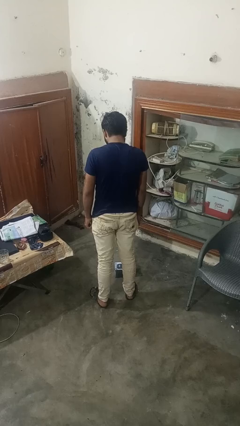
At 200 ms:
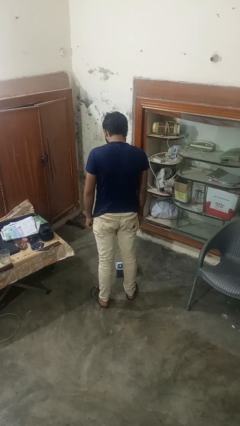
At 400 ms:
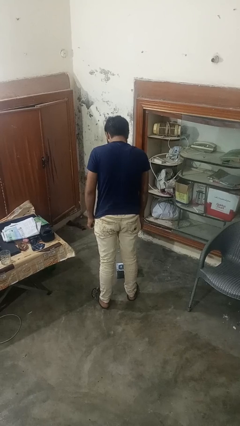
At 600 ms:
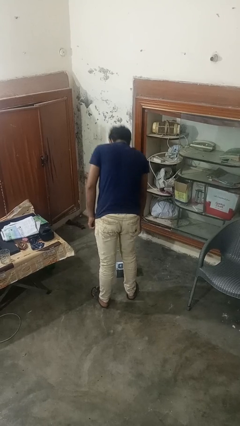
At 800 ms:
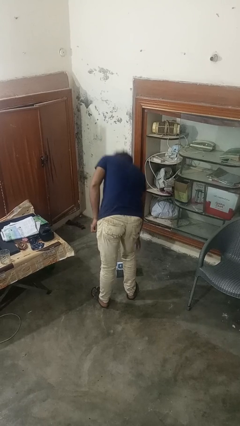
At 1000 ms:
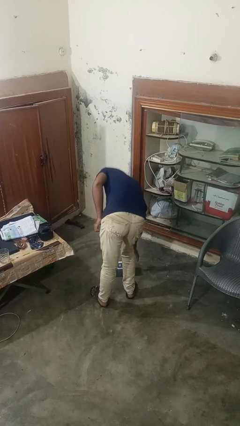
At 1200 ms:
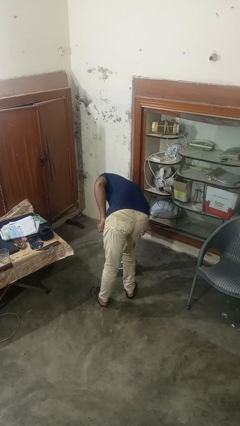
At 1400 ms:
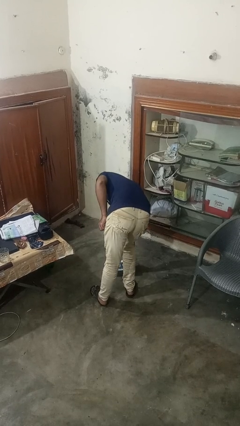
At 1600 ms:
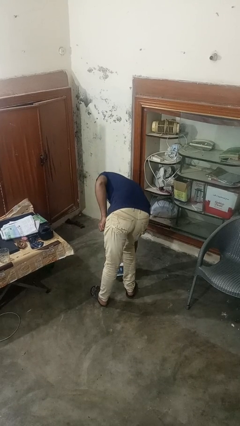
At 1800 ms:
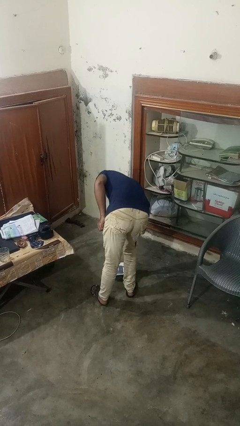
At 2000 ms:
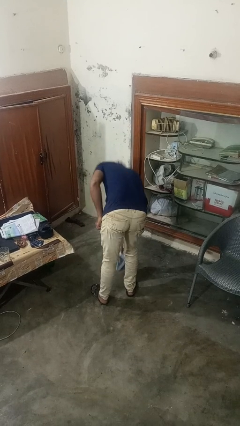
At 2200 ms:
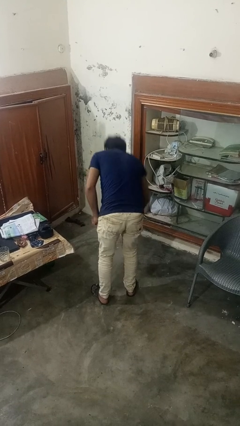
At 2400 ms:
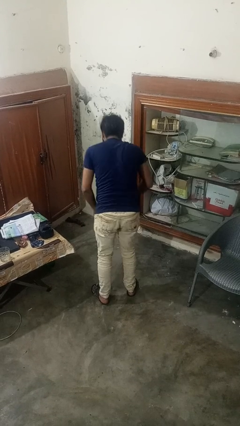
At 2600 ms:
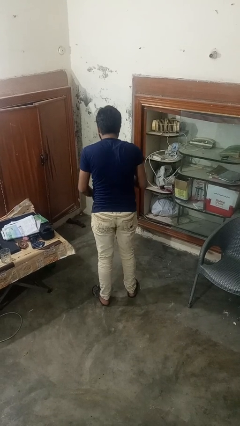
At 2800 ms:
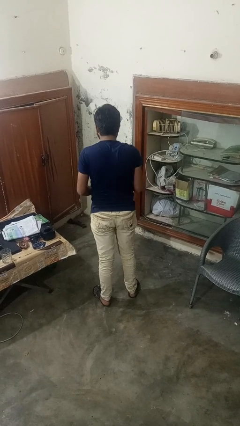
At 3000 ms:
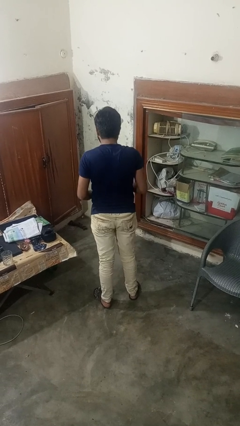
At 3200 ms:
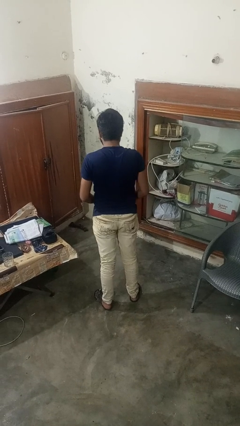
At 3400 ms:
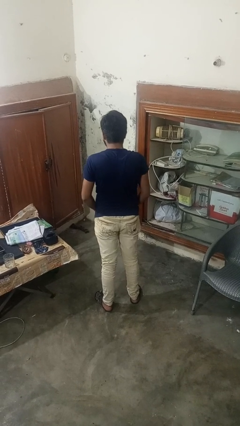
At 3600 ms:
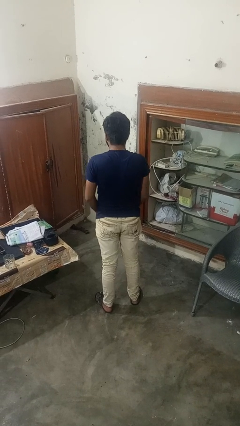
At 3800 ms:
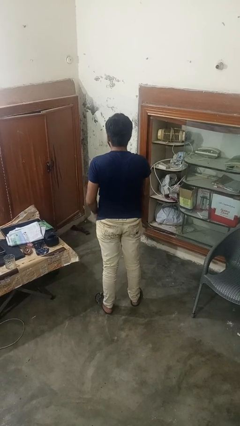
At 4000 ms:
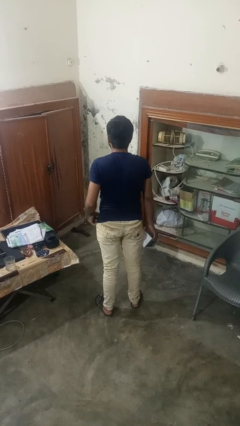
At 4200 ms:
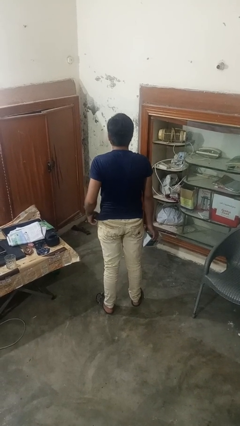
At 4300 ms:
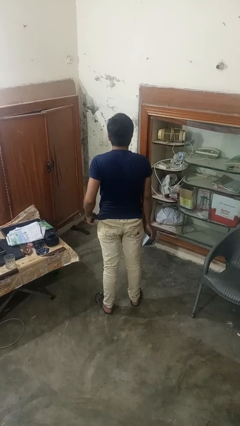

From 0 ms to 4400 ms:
person picks up object from floor

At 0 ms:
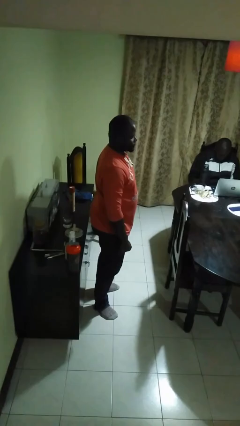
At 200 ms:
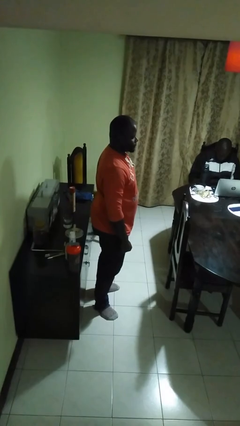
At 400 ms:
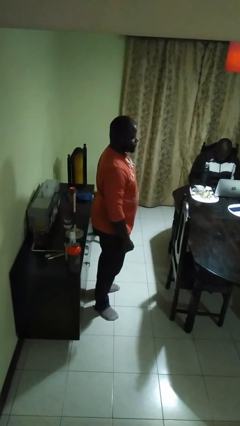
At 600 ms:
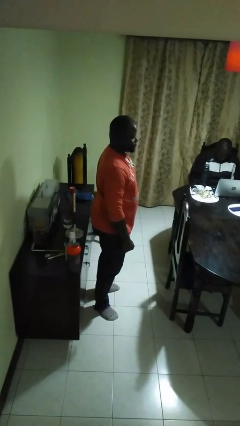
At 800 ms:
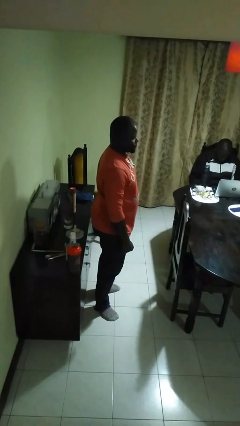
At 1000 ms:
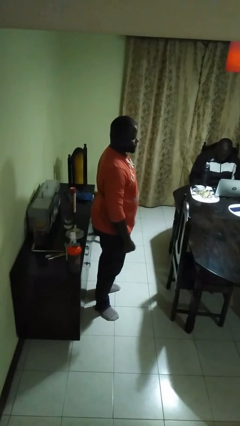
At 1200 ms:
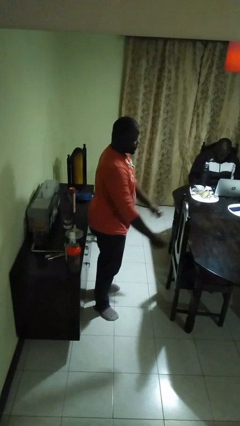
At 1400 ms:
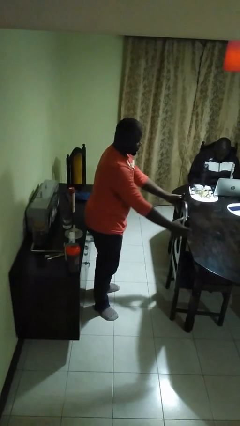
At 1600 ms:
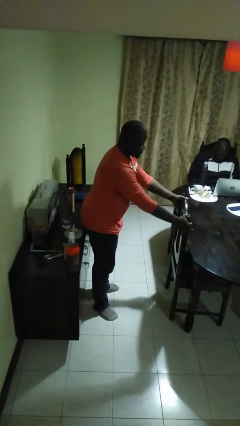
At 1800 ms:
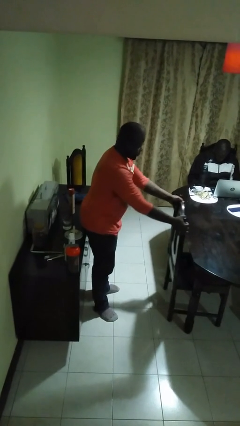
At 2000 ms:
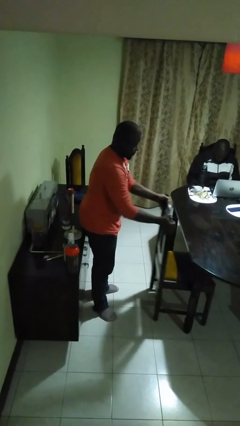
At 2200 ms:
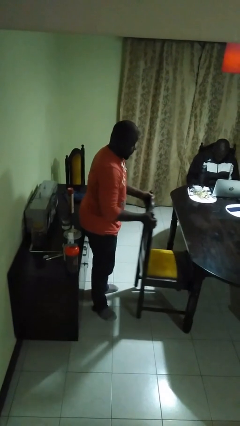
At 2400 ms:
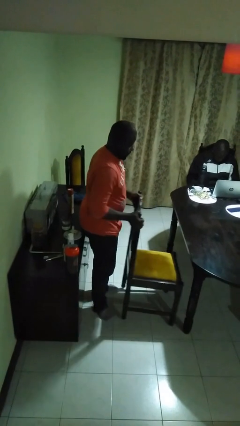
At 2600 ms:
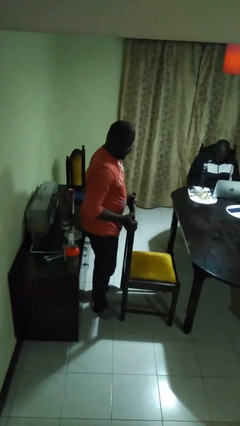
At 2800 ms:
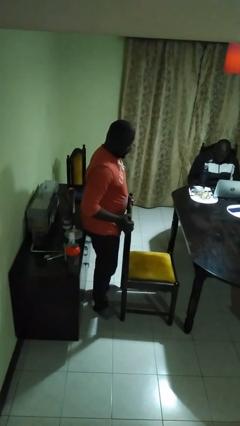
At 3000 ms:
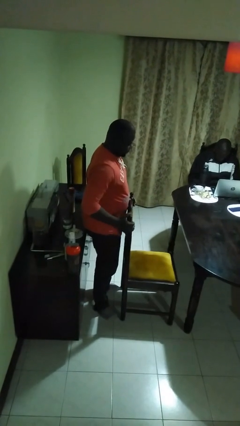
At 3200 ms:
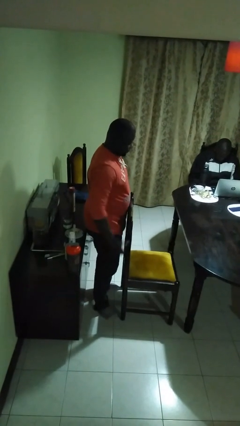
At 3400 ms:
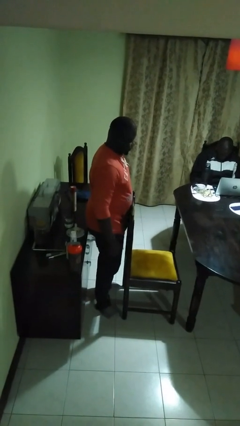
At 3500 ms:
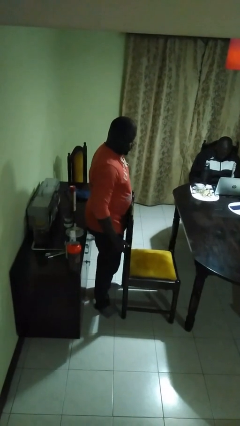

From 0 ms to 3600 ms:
person pulls out chair

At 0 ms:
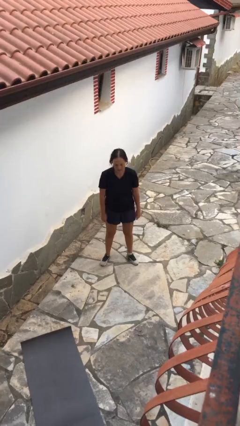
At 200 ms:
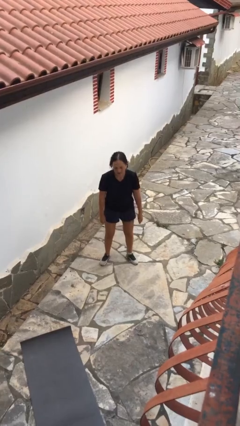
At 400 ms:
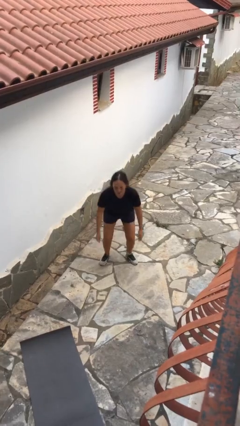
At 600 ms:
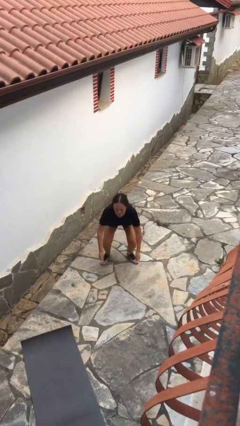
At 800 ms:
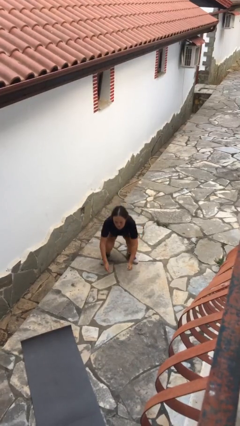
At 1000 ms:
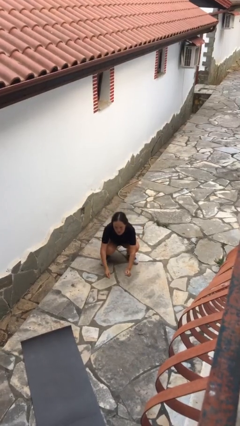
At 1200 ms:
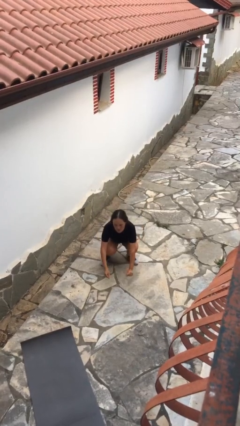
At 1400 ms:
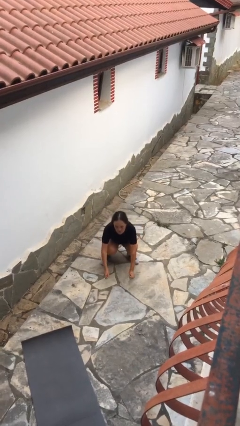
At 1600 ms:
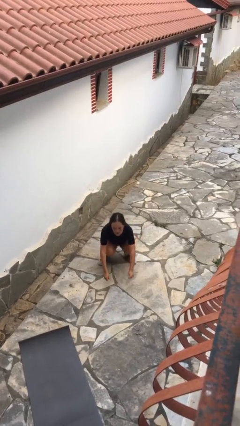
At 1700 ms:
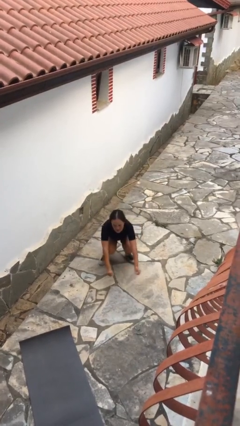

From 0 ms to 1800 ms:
person squats

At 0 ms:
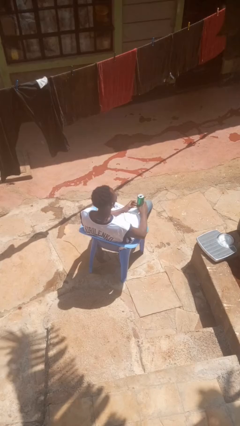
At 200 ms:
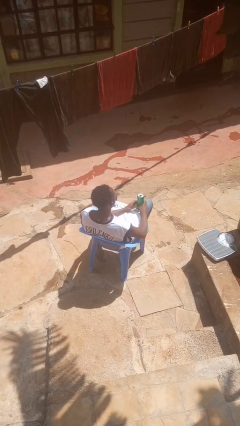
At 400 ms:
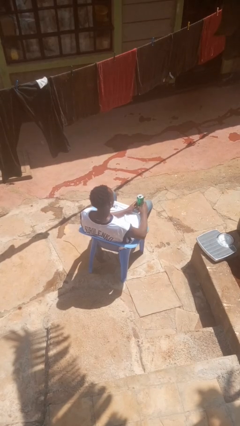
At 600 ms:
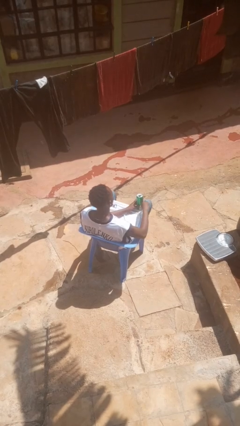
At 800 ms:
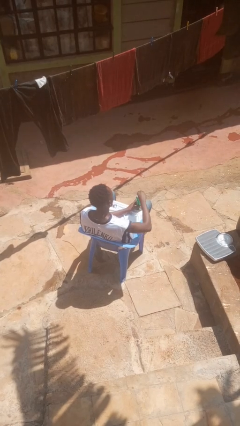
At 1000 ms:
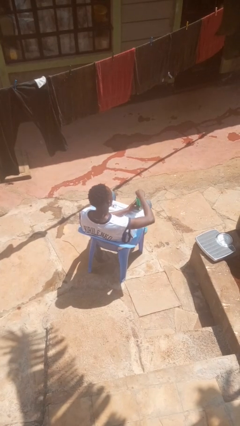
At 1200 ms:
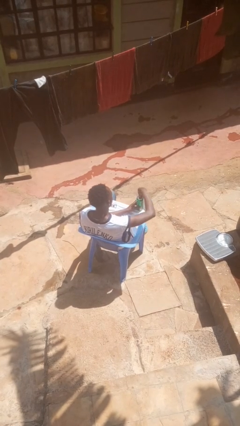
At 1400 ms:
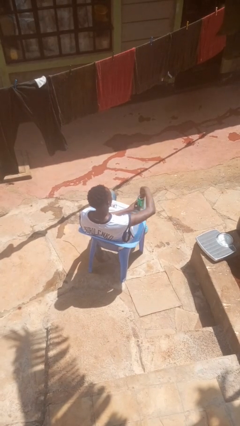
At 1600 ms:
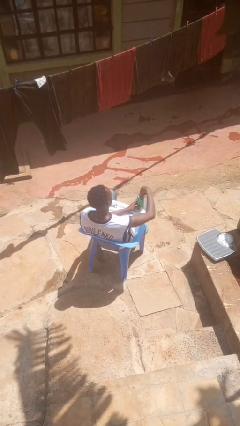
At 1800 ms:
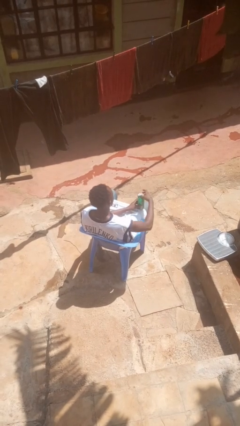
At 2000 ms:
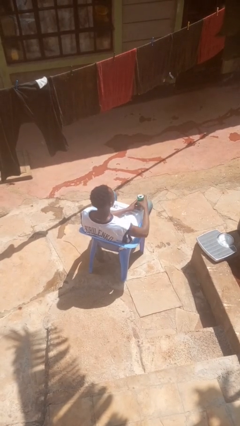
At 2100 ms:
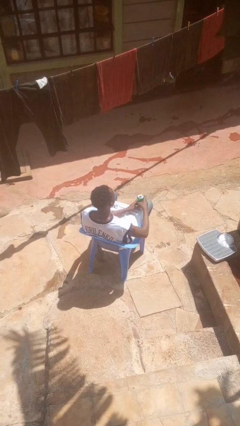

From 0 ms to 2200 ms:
person opens beverage can

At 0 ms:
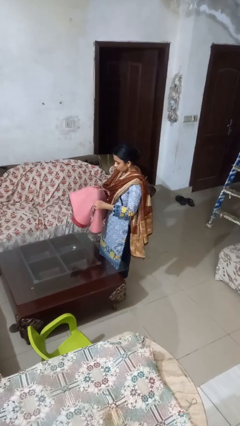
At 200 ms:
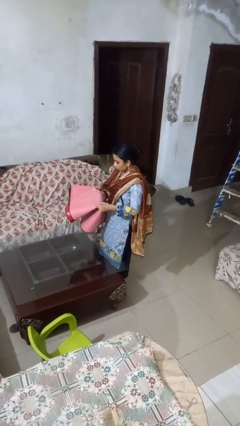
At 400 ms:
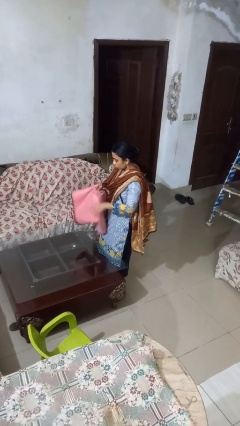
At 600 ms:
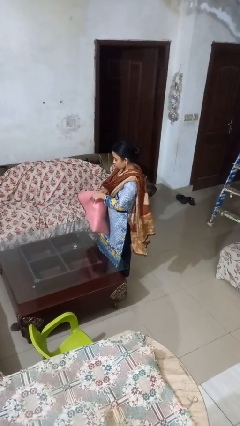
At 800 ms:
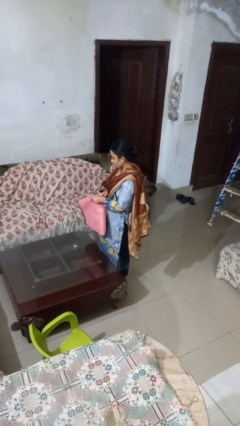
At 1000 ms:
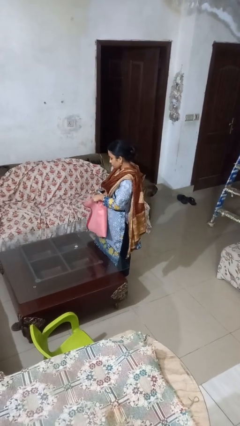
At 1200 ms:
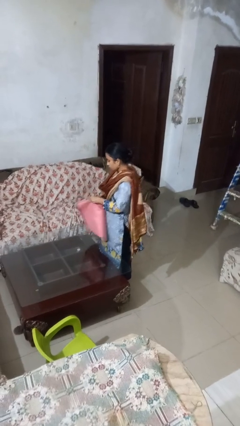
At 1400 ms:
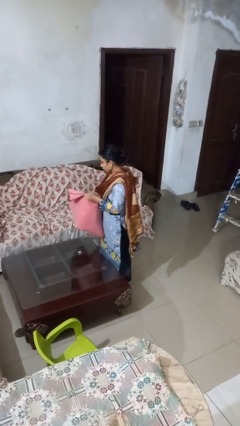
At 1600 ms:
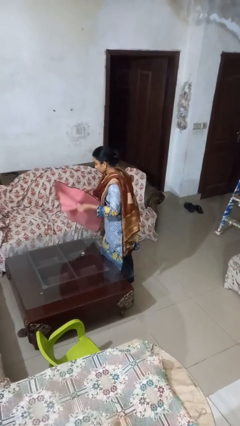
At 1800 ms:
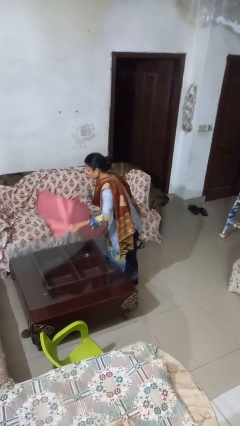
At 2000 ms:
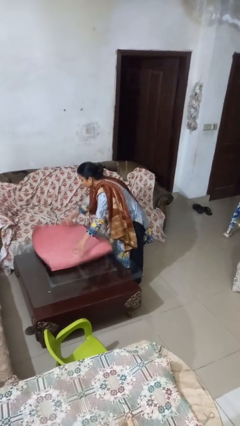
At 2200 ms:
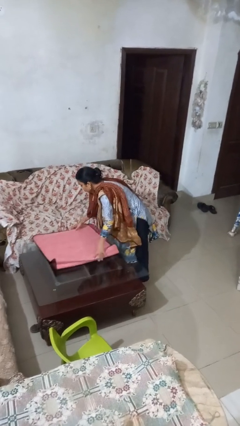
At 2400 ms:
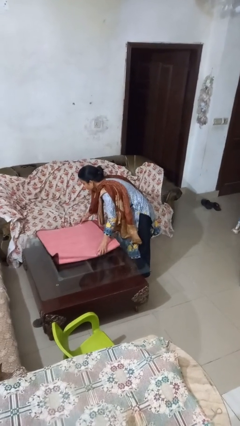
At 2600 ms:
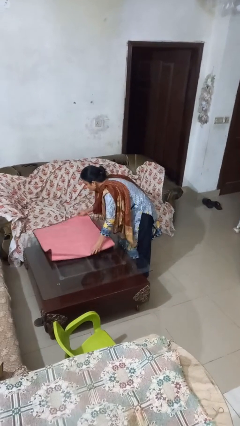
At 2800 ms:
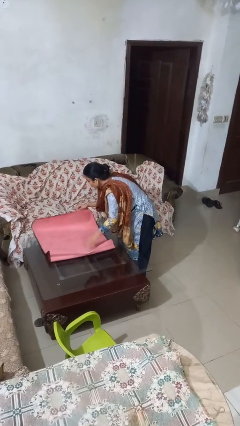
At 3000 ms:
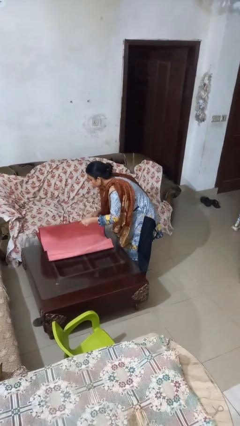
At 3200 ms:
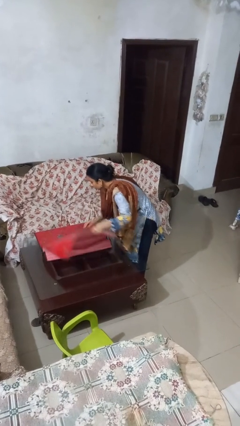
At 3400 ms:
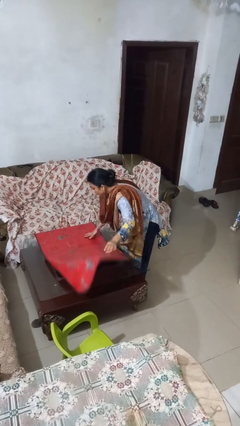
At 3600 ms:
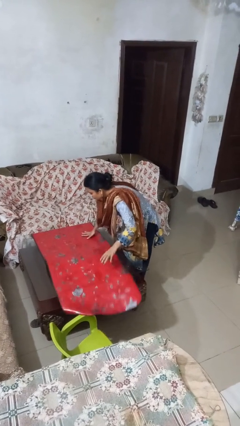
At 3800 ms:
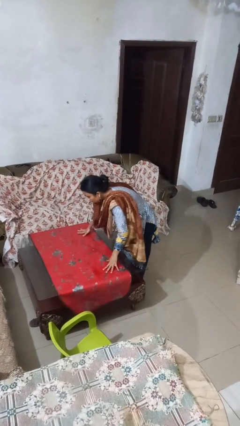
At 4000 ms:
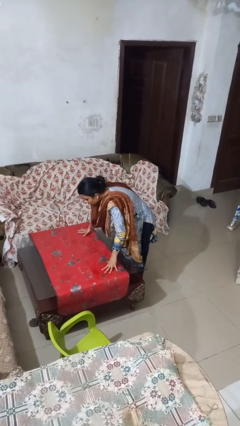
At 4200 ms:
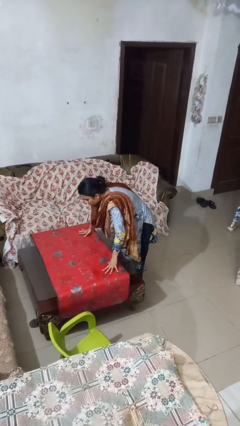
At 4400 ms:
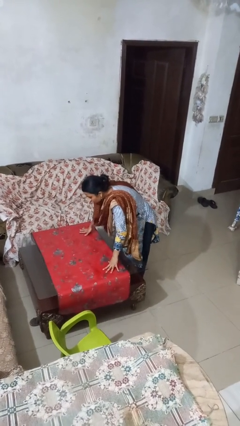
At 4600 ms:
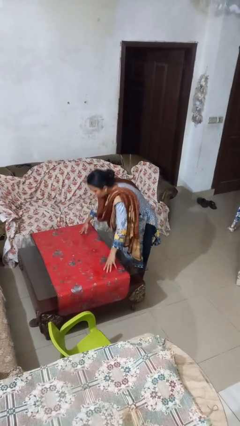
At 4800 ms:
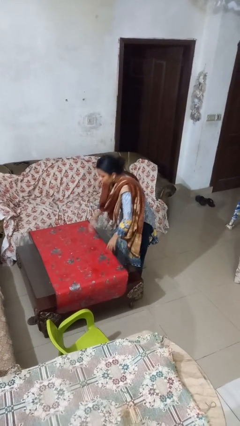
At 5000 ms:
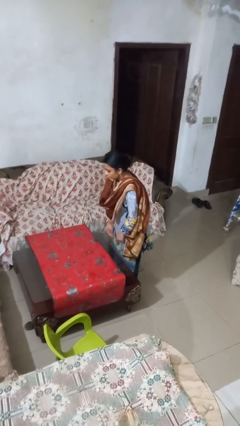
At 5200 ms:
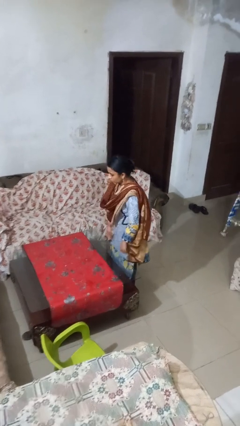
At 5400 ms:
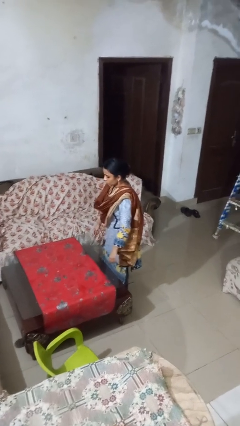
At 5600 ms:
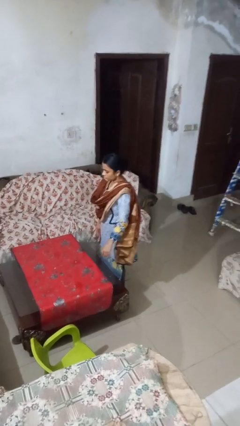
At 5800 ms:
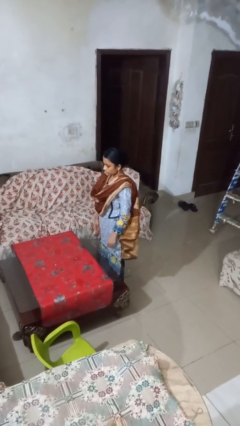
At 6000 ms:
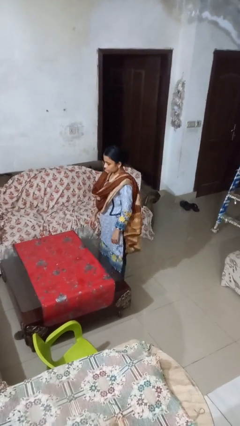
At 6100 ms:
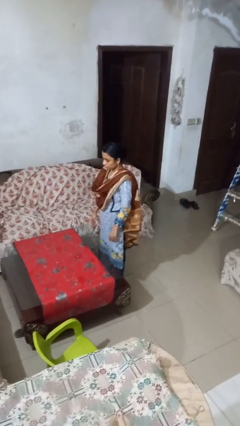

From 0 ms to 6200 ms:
person spreads tablecloth
